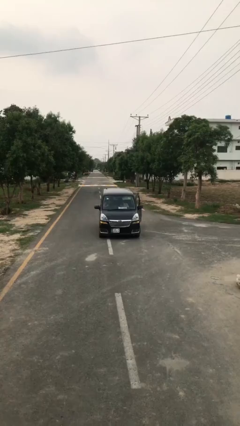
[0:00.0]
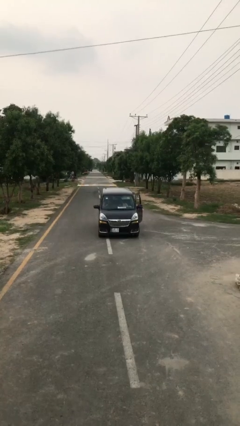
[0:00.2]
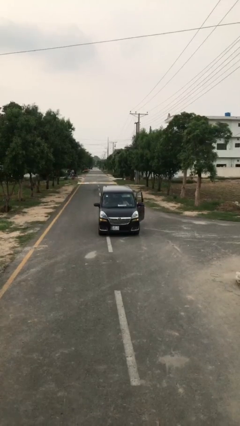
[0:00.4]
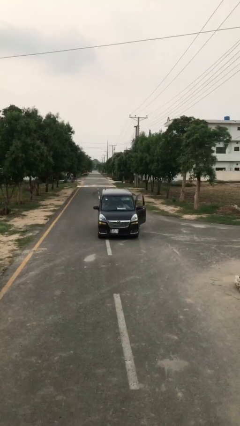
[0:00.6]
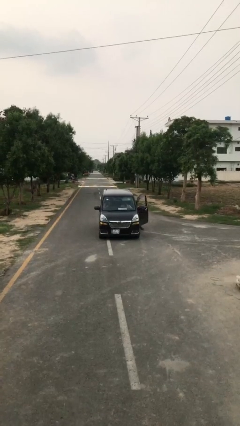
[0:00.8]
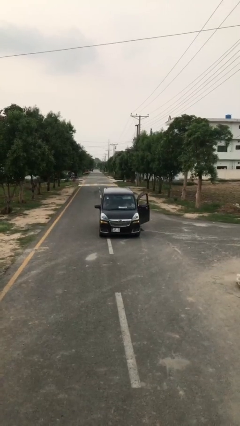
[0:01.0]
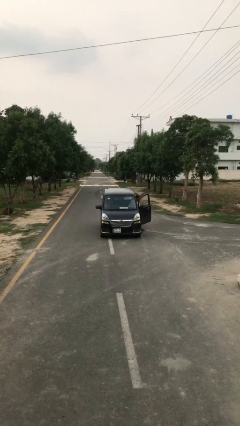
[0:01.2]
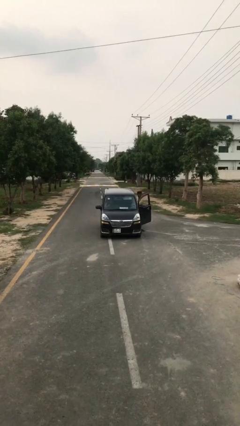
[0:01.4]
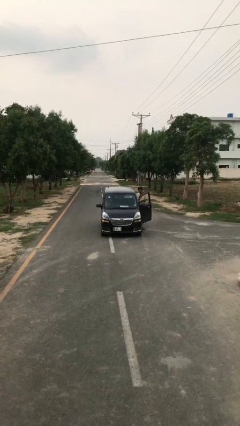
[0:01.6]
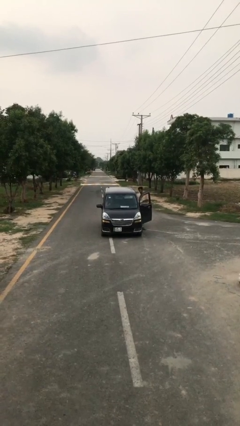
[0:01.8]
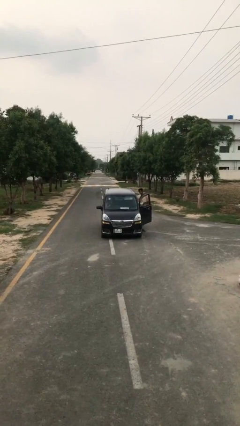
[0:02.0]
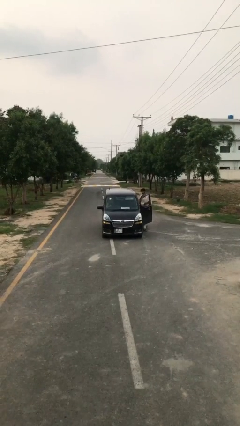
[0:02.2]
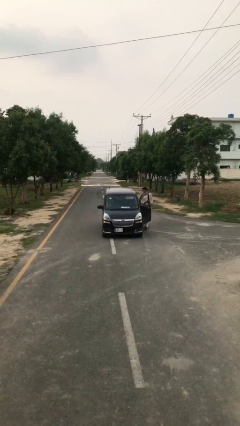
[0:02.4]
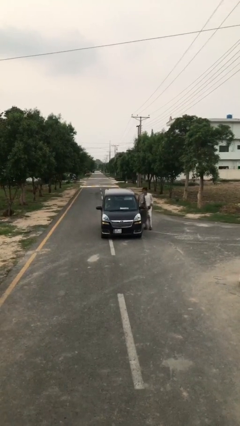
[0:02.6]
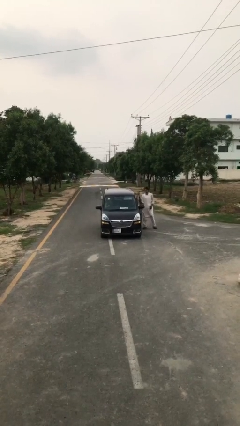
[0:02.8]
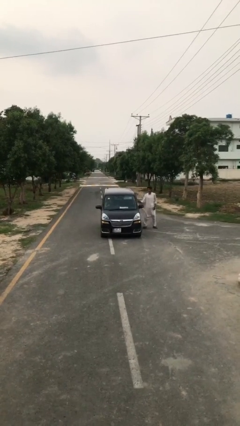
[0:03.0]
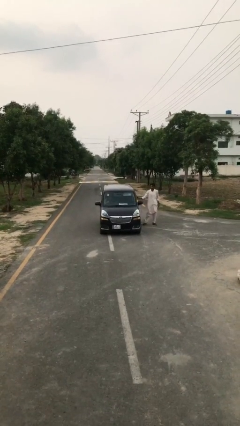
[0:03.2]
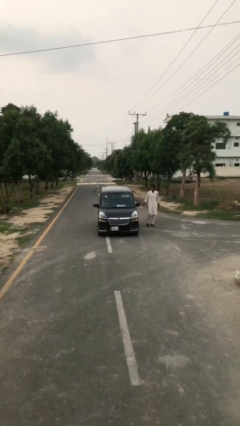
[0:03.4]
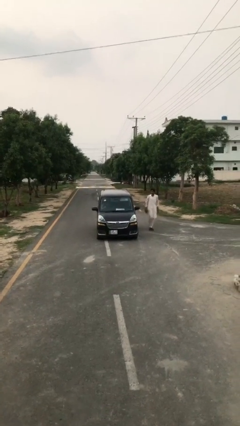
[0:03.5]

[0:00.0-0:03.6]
car drops off person

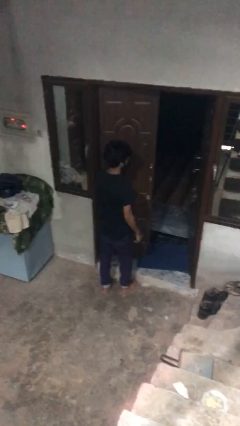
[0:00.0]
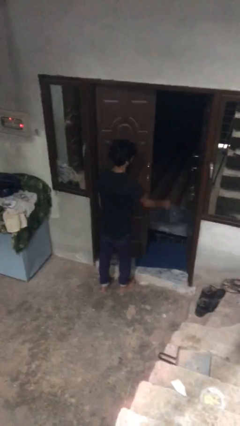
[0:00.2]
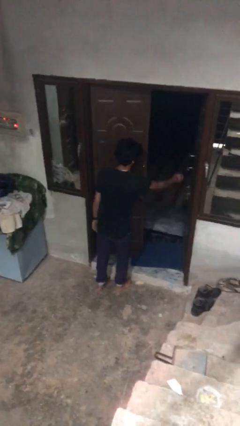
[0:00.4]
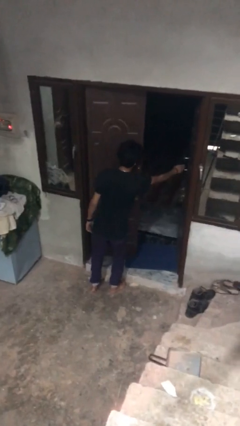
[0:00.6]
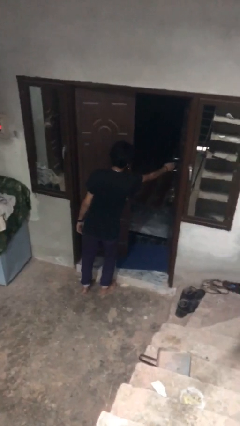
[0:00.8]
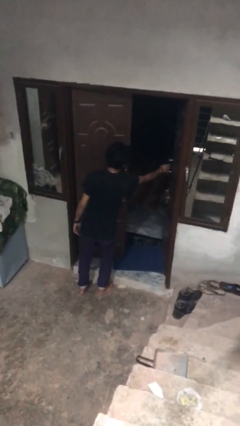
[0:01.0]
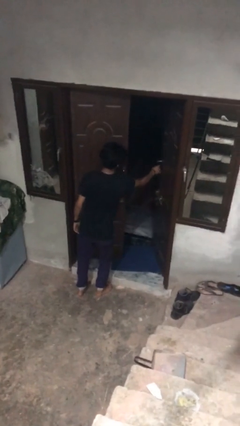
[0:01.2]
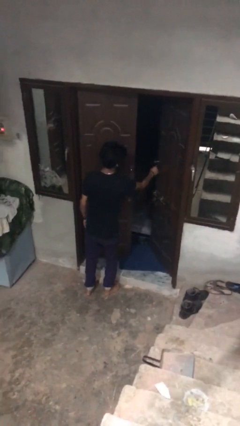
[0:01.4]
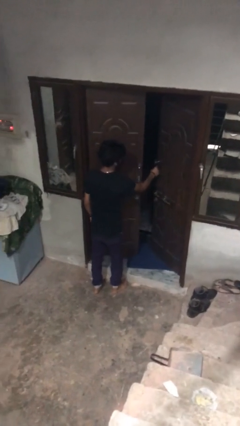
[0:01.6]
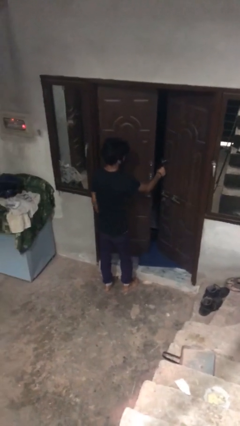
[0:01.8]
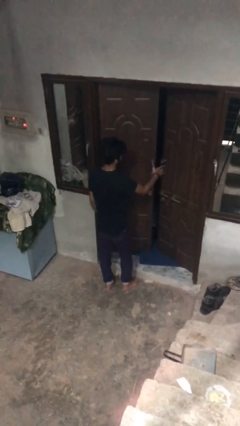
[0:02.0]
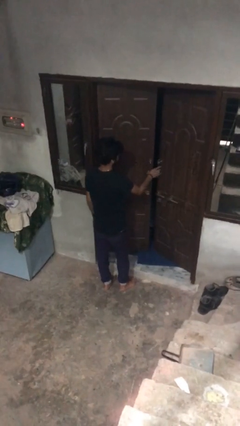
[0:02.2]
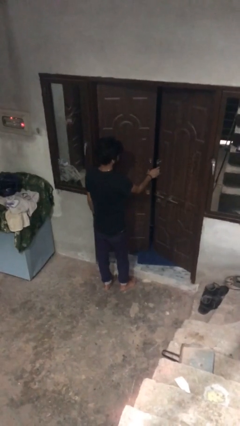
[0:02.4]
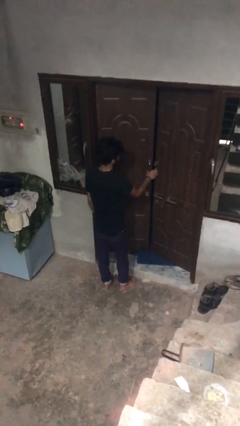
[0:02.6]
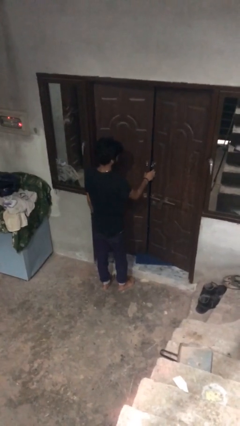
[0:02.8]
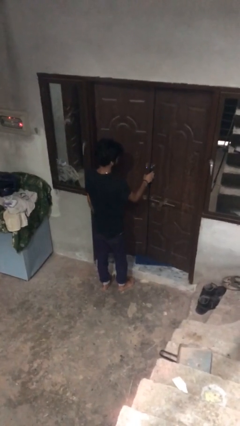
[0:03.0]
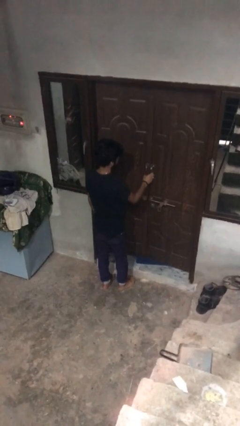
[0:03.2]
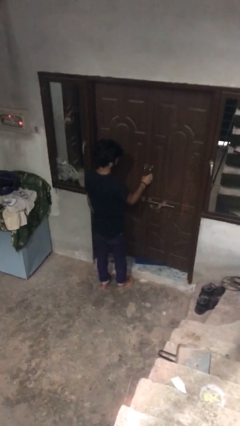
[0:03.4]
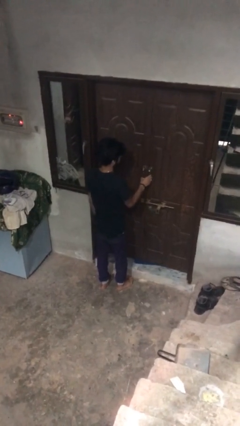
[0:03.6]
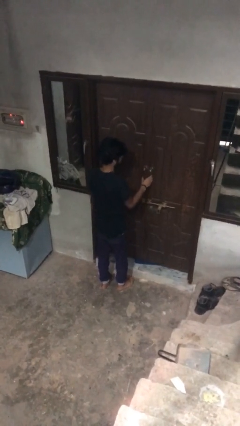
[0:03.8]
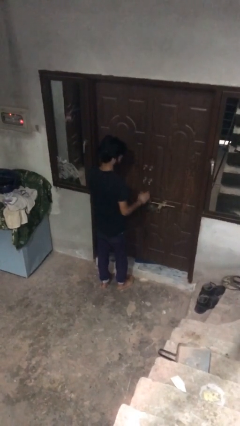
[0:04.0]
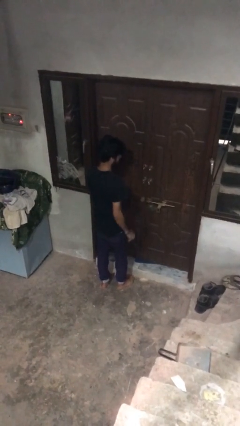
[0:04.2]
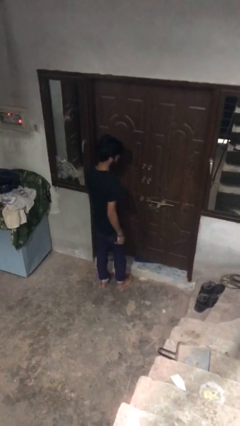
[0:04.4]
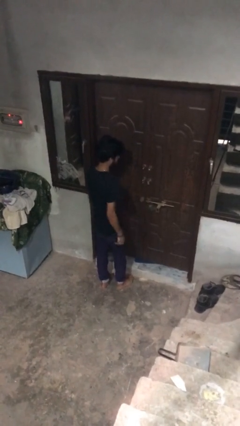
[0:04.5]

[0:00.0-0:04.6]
person closes facility door

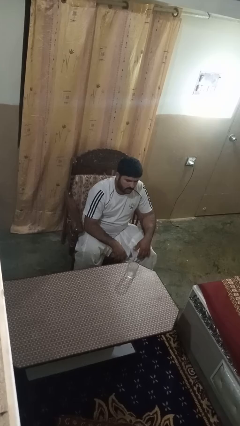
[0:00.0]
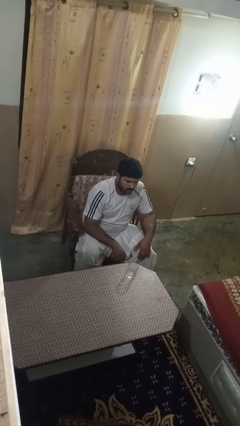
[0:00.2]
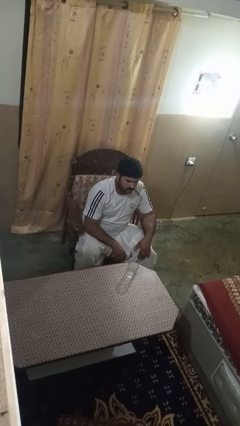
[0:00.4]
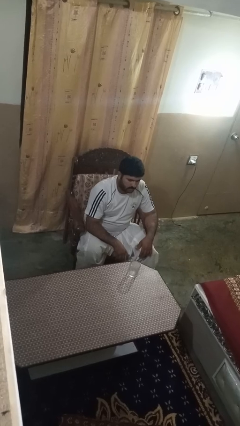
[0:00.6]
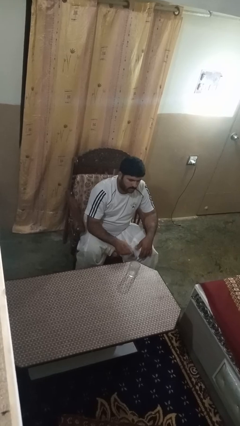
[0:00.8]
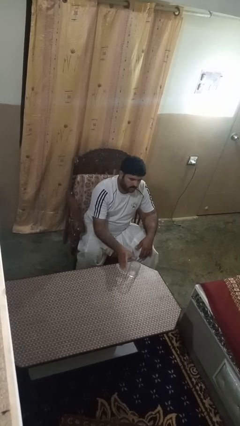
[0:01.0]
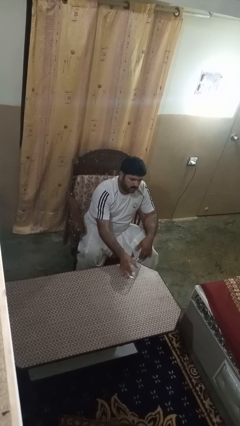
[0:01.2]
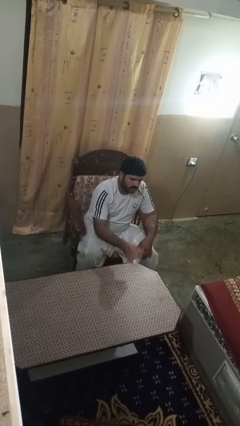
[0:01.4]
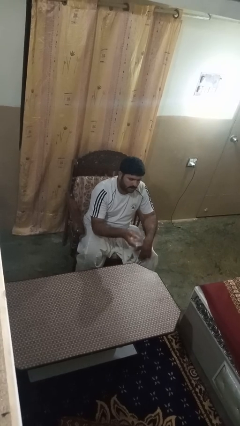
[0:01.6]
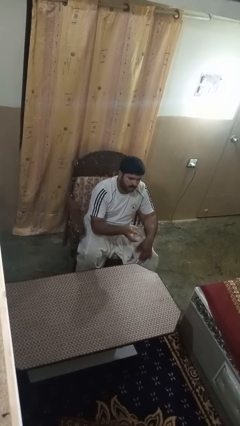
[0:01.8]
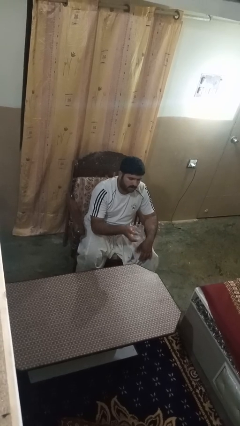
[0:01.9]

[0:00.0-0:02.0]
person picks up object from table

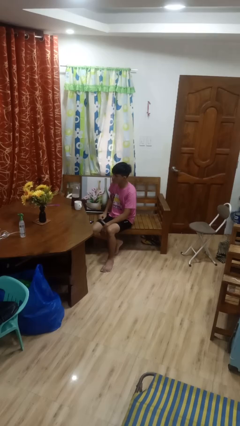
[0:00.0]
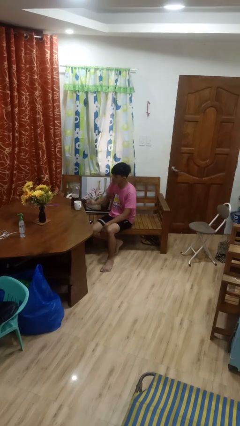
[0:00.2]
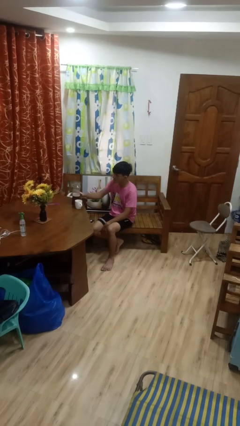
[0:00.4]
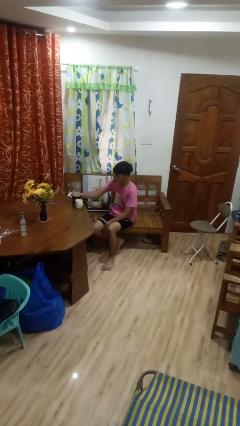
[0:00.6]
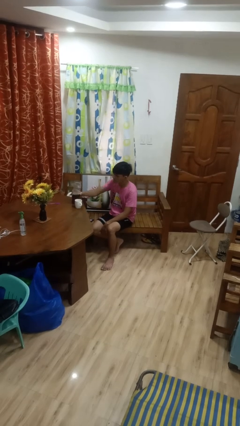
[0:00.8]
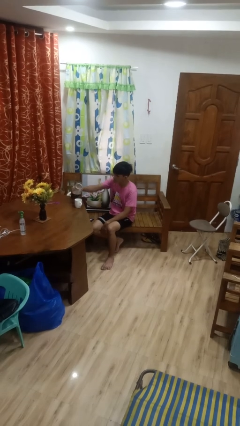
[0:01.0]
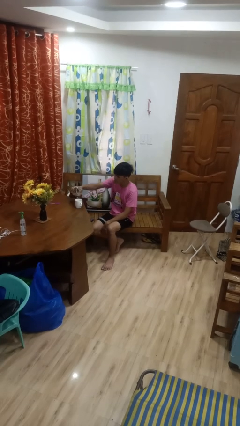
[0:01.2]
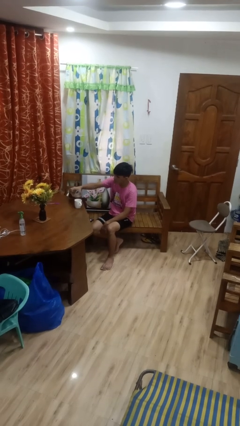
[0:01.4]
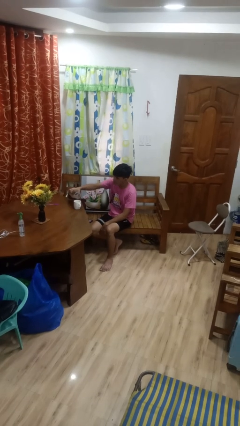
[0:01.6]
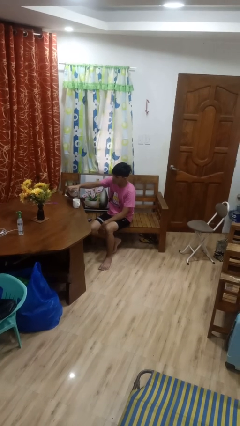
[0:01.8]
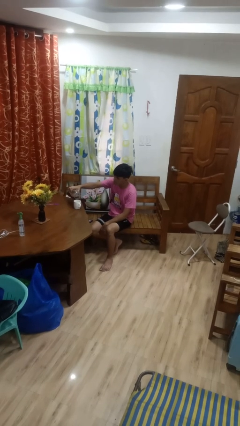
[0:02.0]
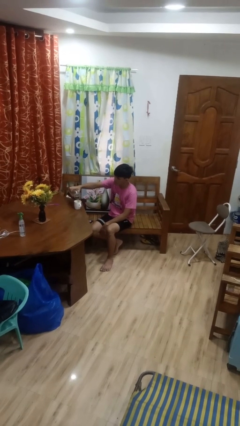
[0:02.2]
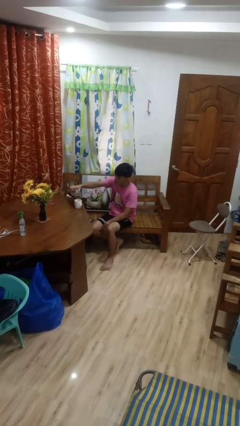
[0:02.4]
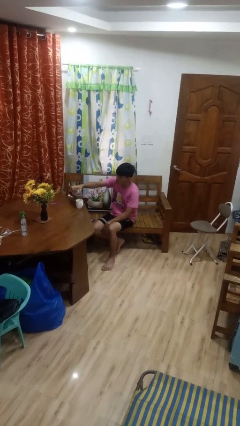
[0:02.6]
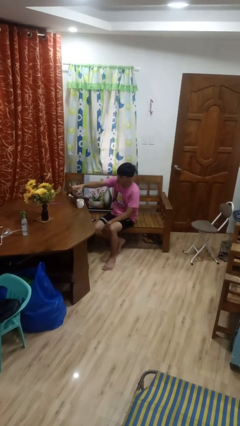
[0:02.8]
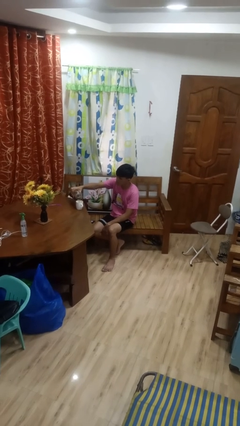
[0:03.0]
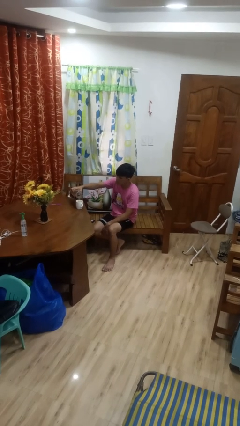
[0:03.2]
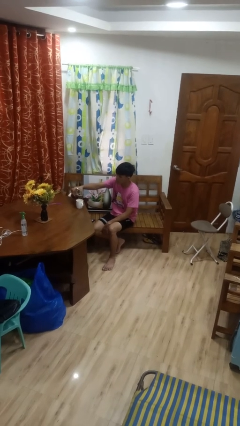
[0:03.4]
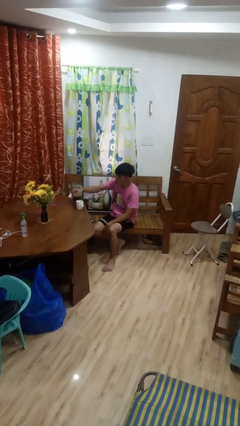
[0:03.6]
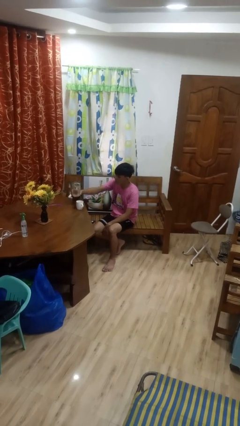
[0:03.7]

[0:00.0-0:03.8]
person pours coffee into mug

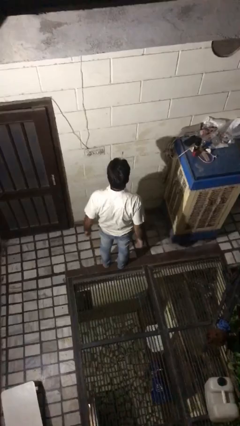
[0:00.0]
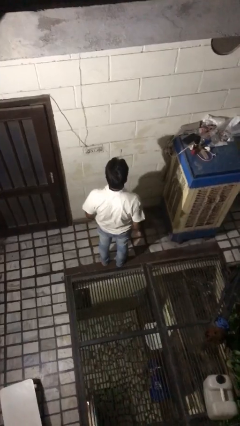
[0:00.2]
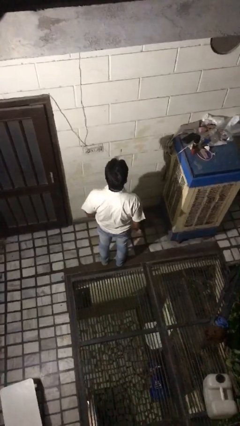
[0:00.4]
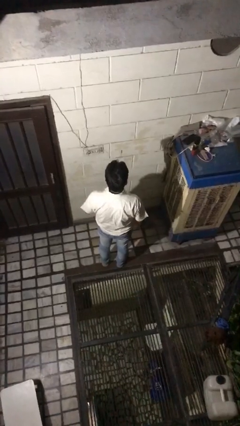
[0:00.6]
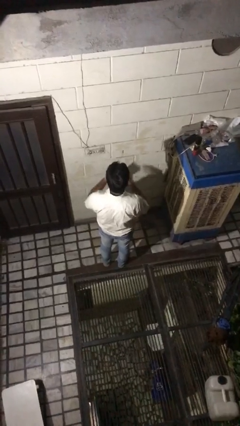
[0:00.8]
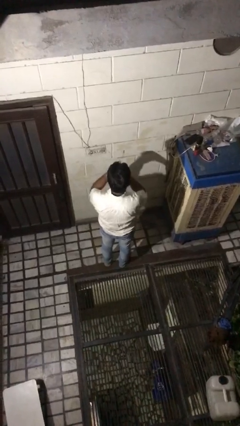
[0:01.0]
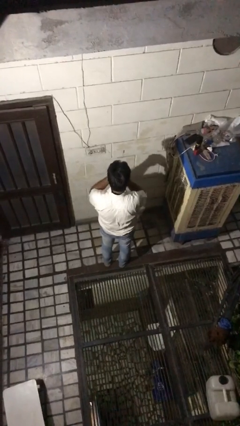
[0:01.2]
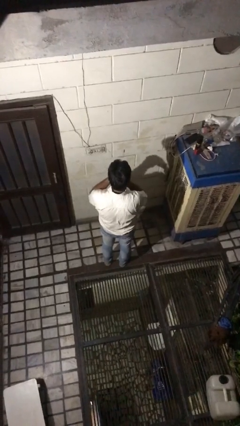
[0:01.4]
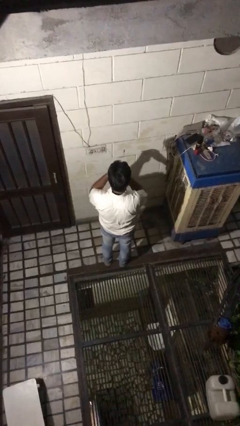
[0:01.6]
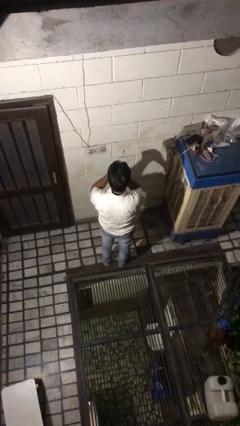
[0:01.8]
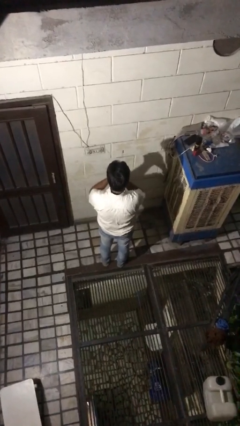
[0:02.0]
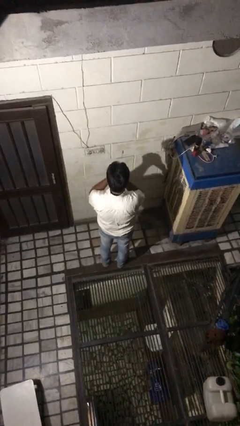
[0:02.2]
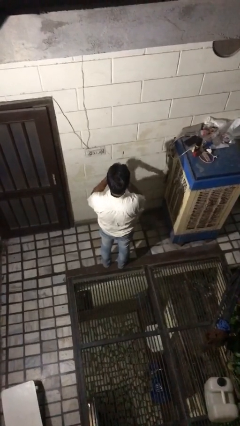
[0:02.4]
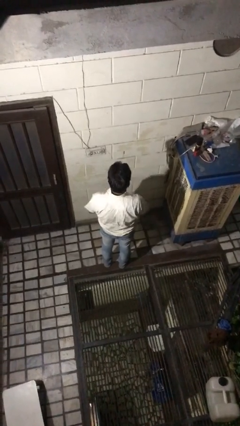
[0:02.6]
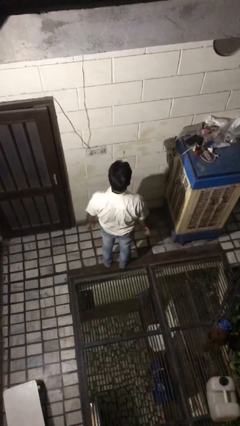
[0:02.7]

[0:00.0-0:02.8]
person snaps fingers

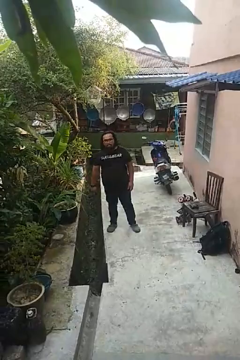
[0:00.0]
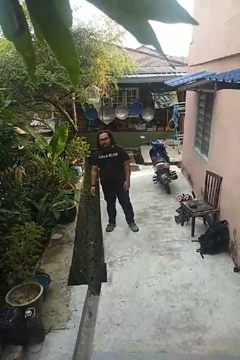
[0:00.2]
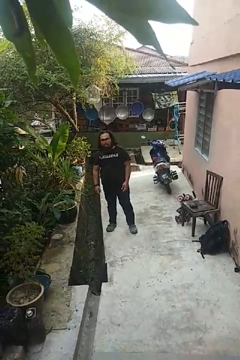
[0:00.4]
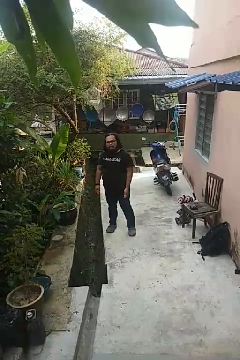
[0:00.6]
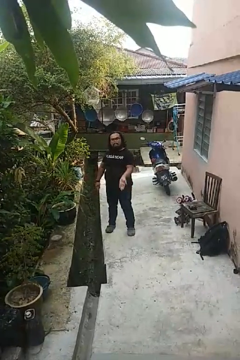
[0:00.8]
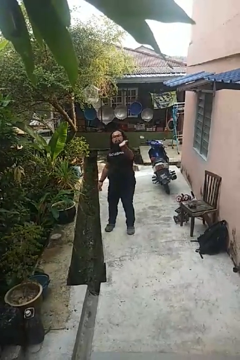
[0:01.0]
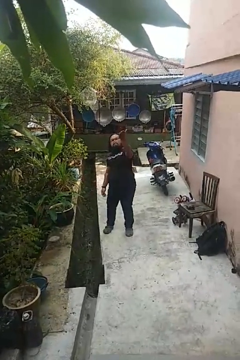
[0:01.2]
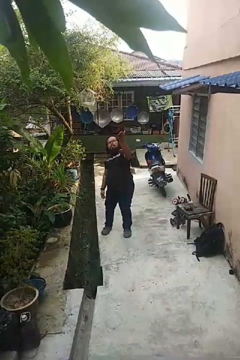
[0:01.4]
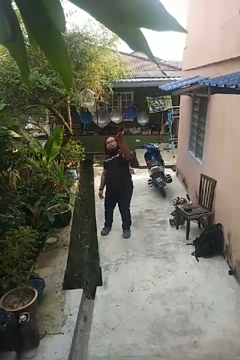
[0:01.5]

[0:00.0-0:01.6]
person gestures swipe up
